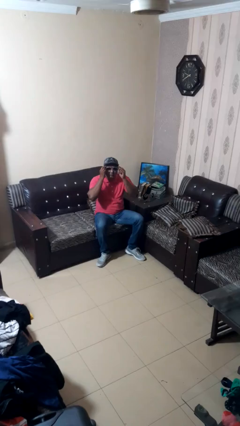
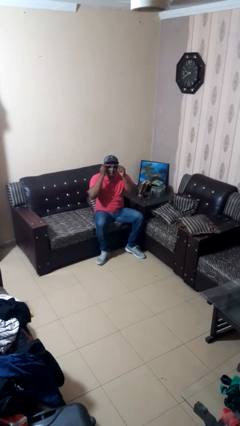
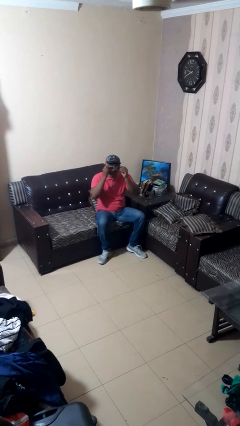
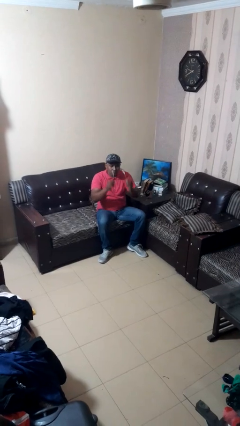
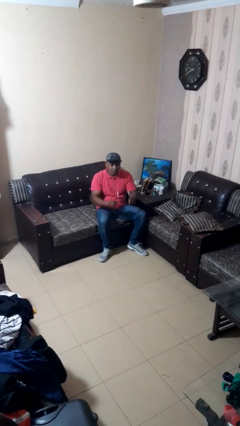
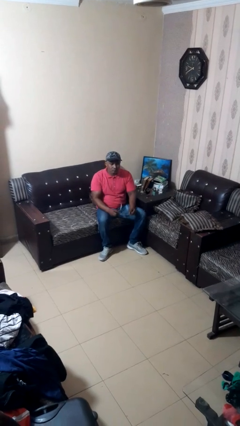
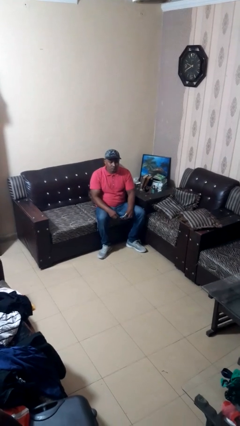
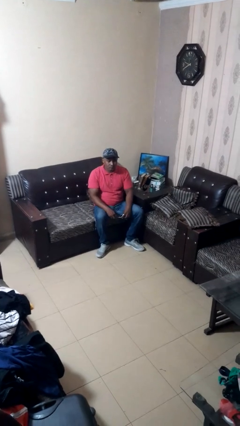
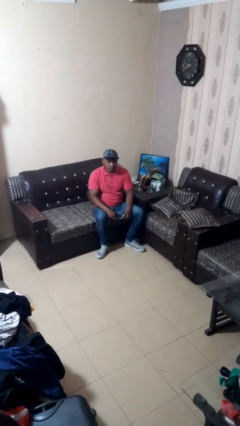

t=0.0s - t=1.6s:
person takes off sunglasses

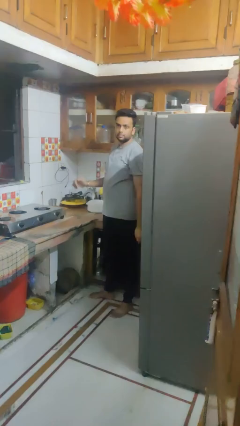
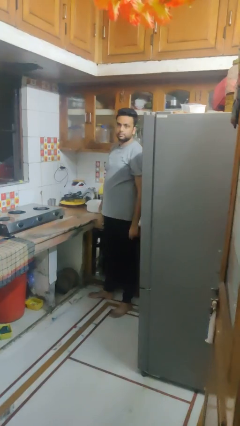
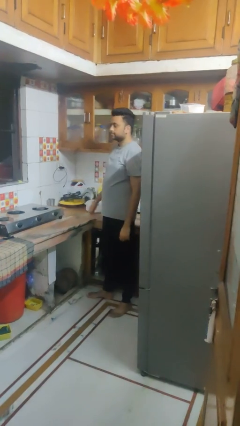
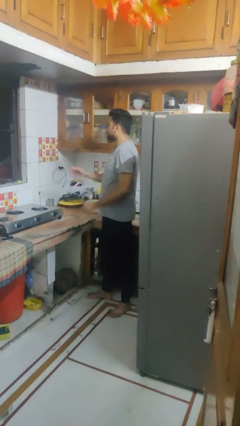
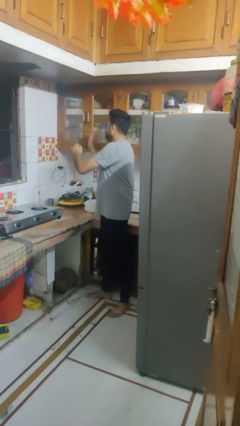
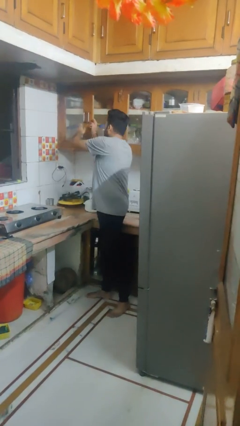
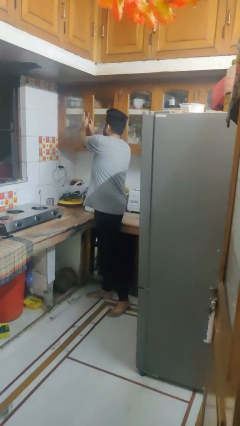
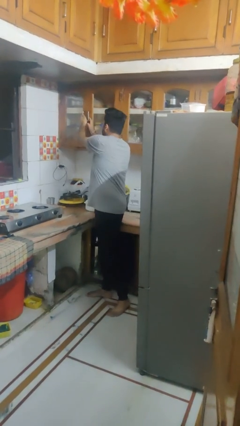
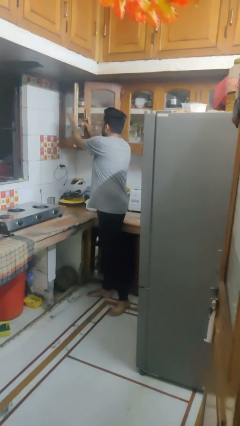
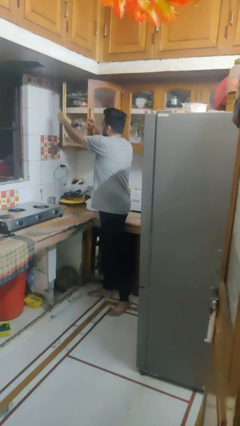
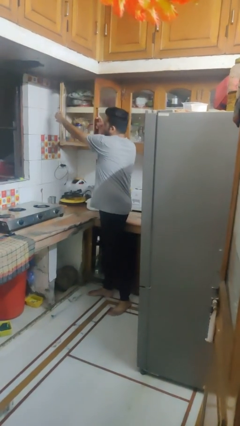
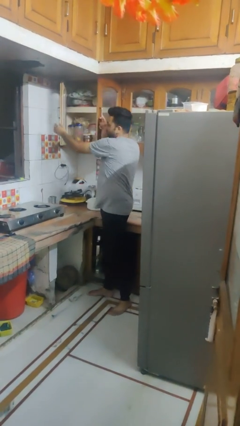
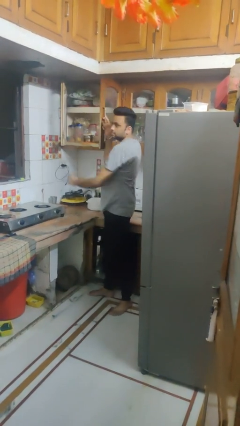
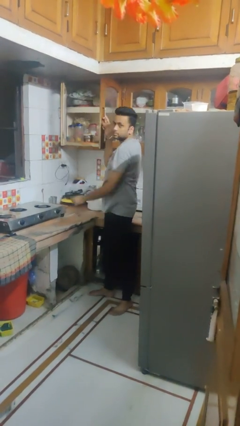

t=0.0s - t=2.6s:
person opens cabinet

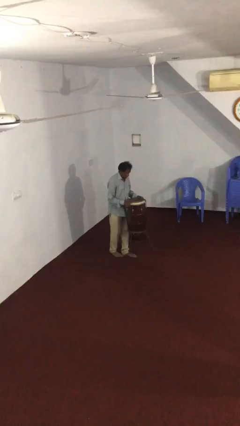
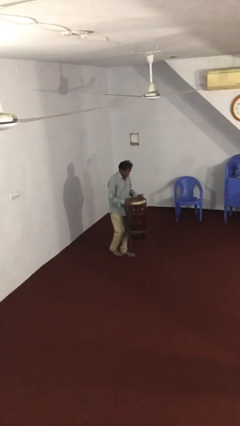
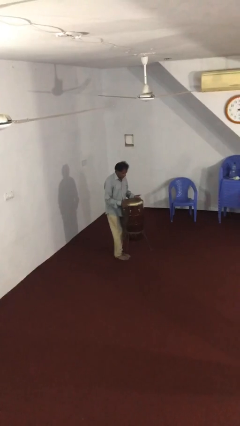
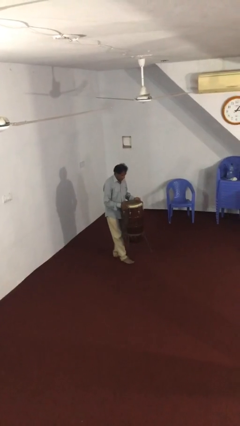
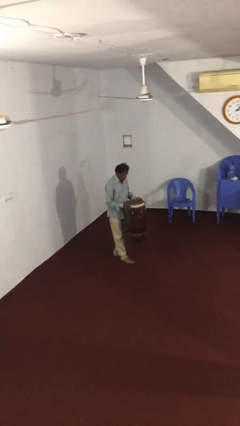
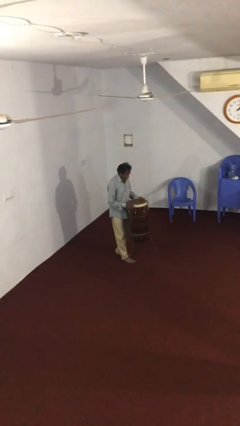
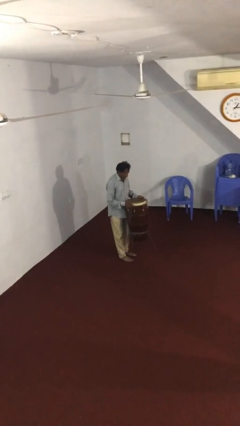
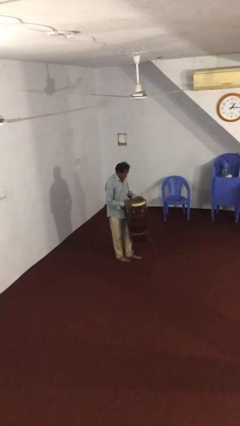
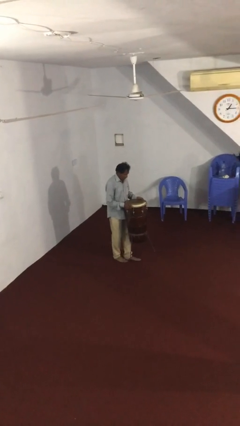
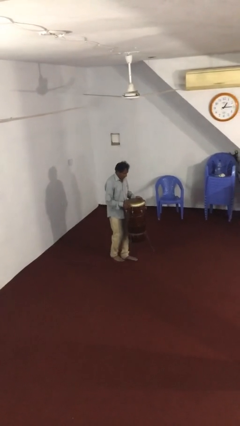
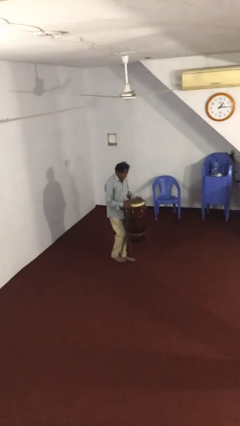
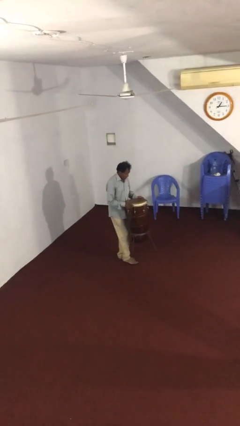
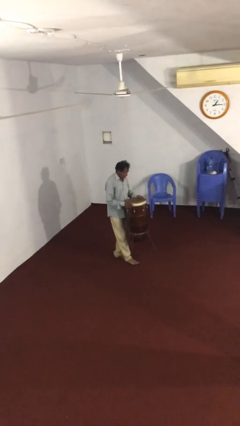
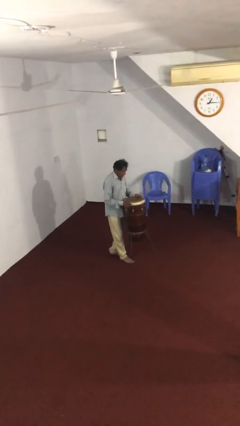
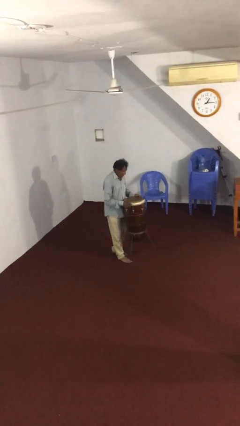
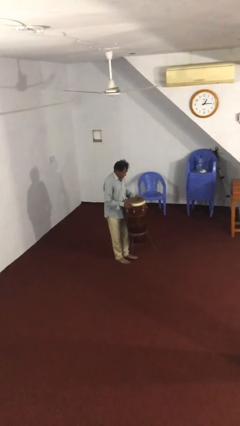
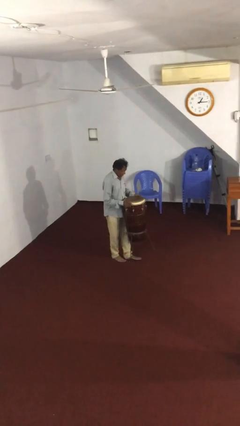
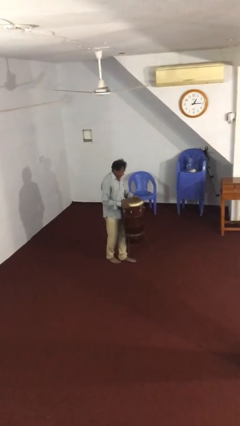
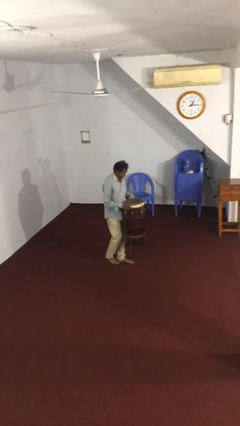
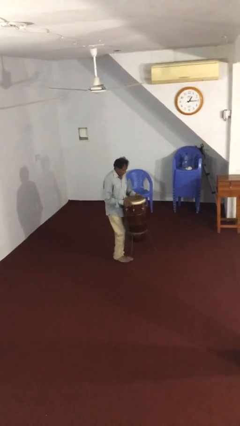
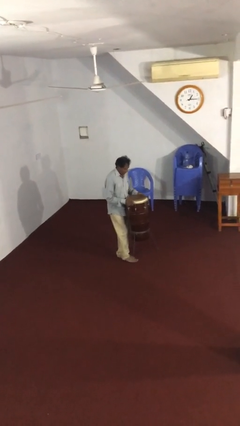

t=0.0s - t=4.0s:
person carries heavy object

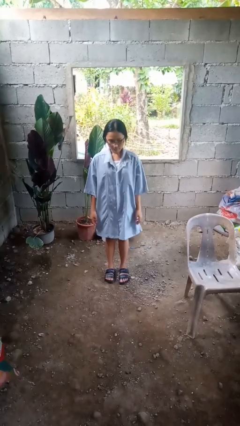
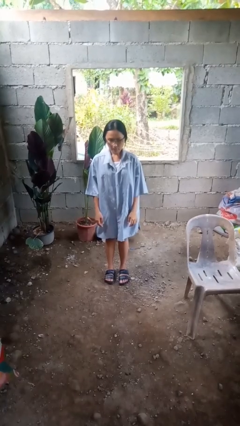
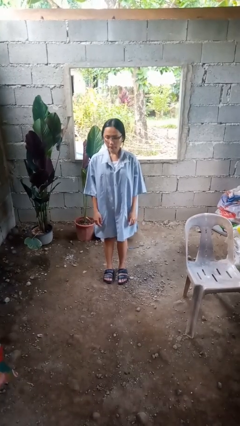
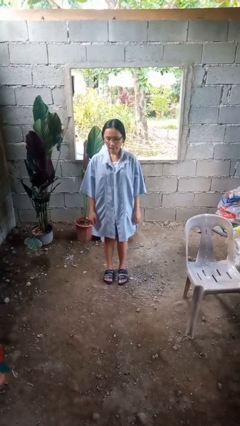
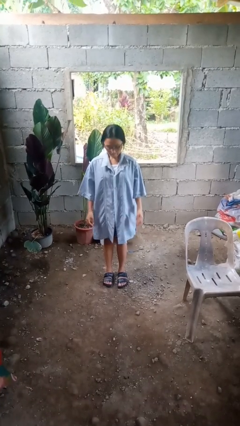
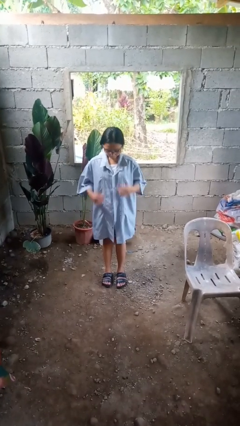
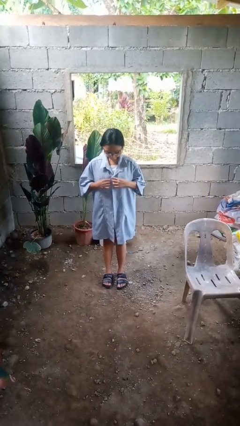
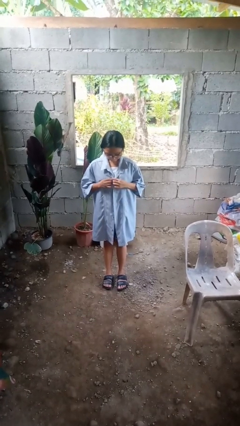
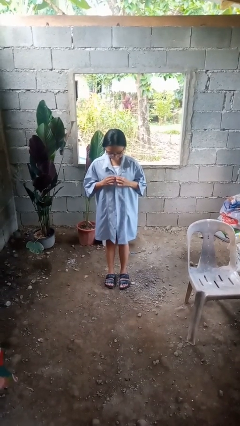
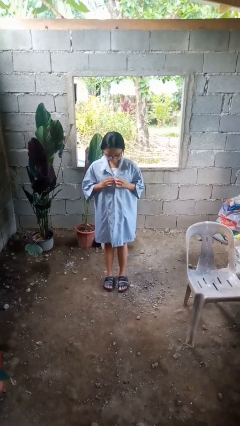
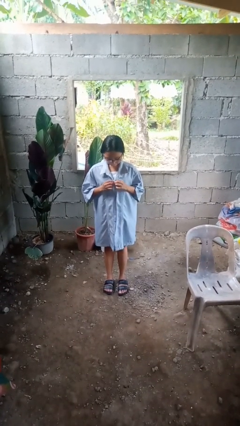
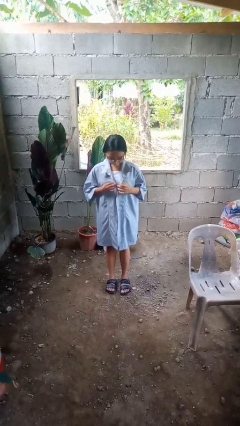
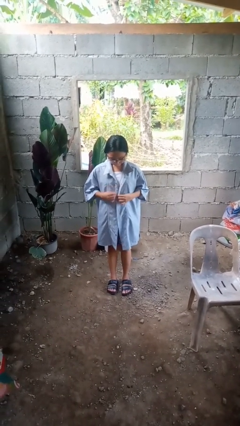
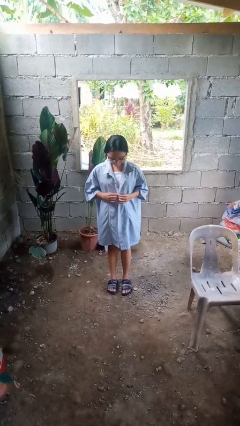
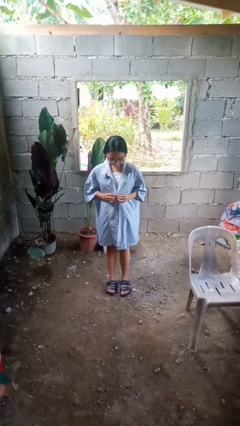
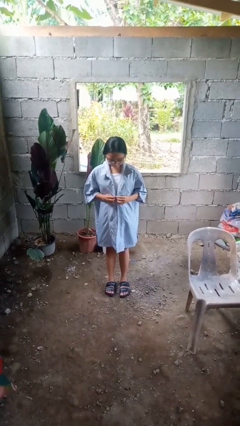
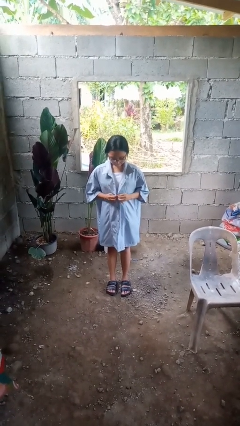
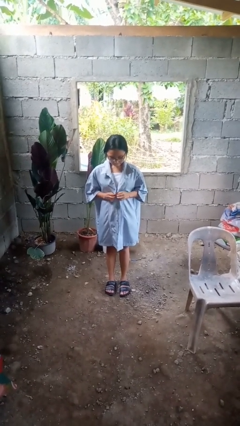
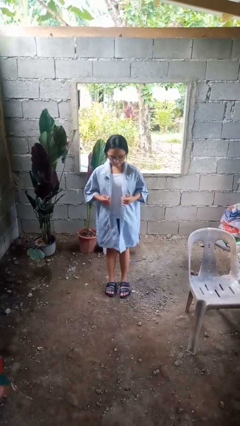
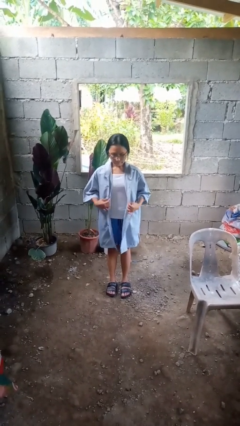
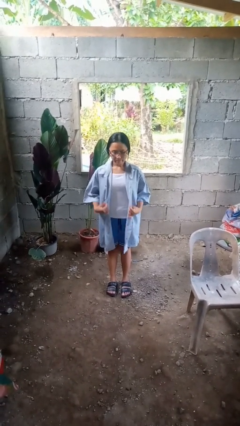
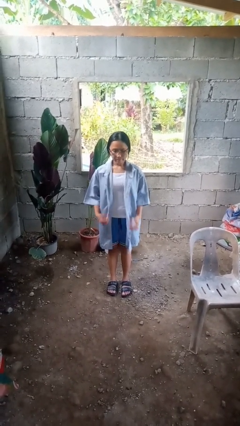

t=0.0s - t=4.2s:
person unbuttons shirt

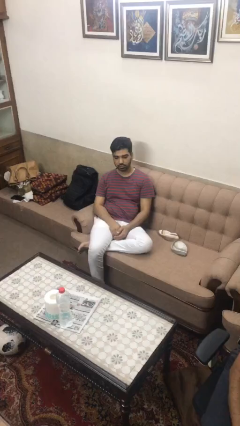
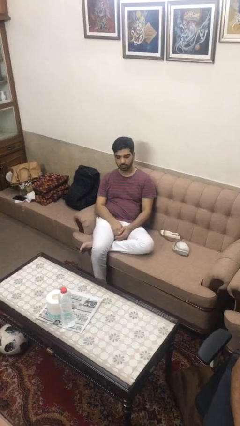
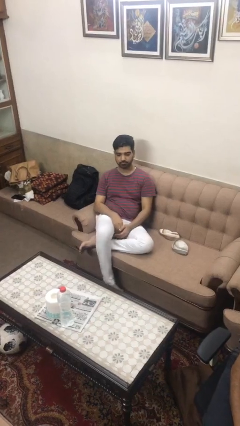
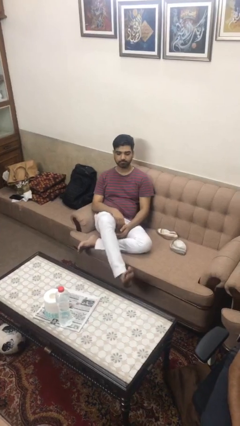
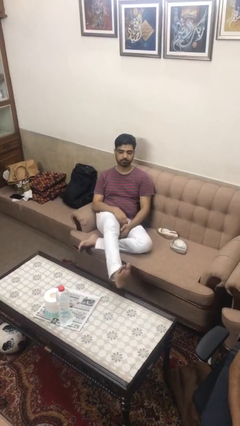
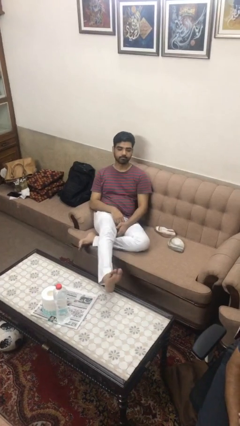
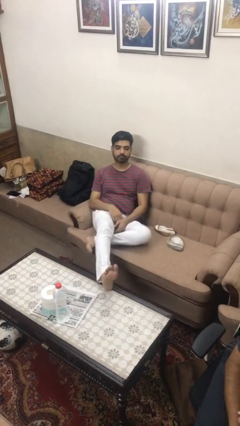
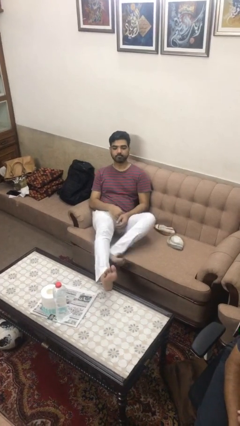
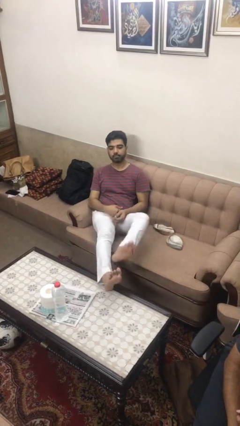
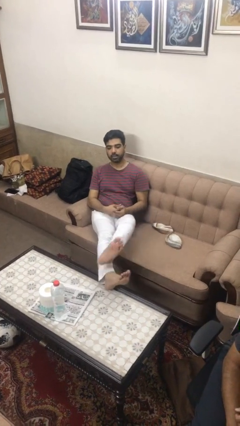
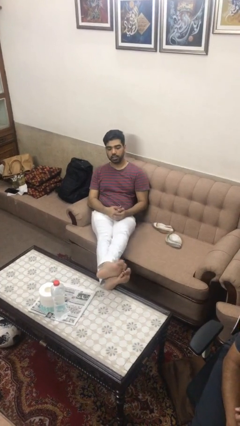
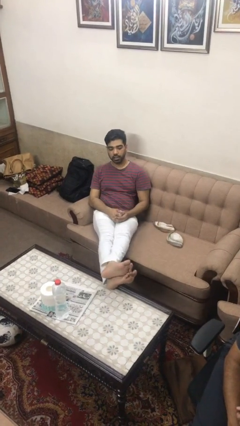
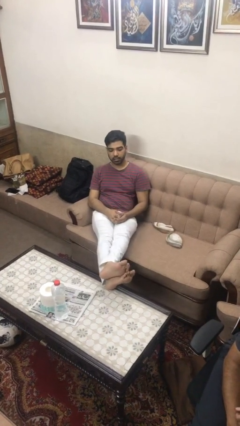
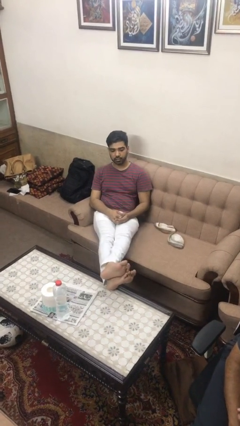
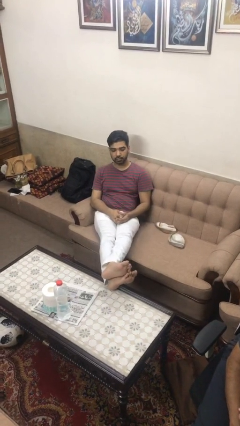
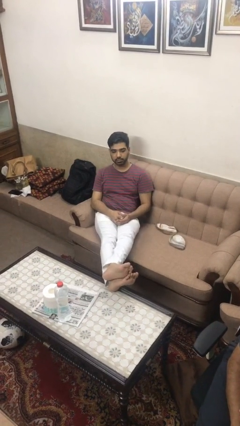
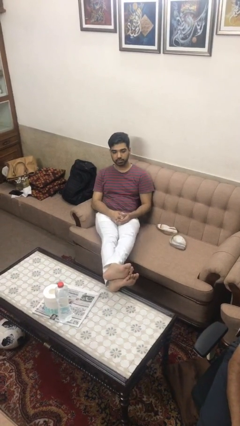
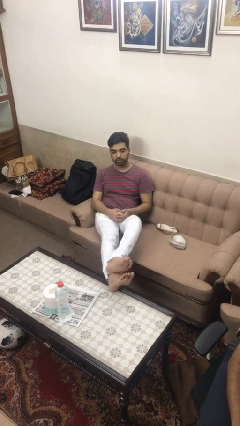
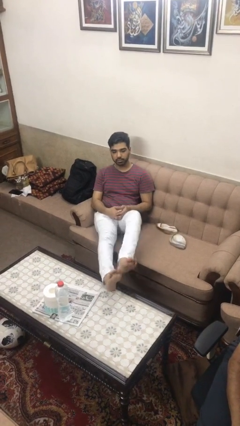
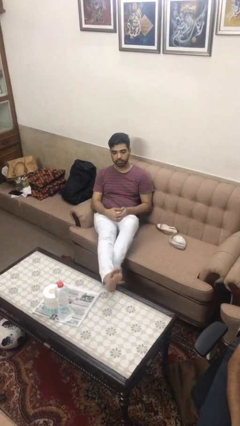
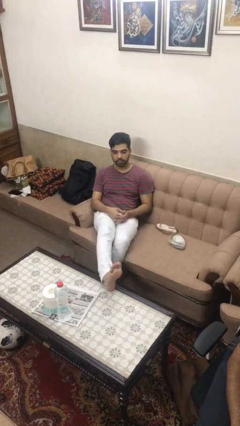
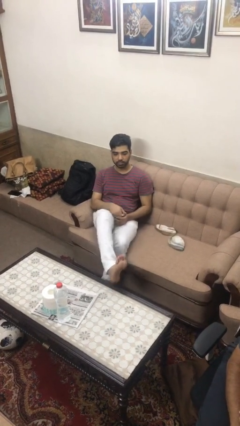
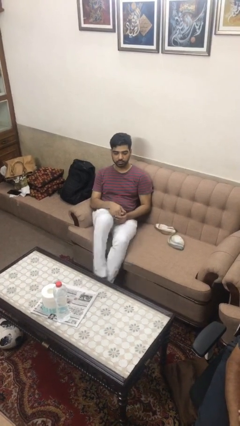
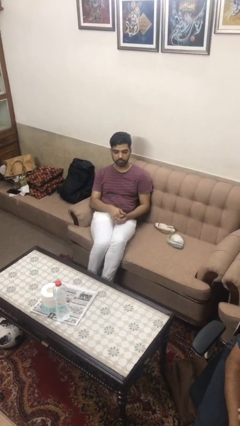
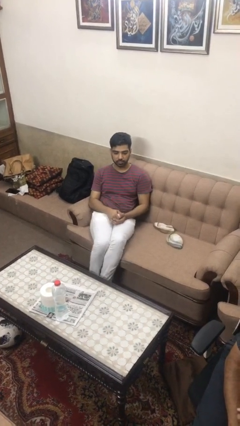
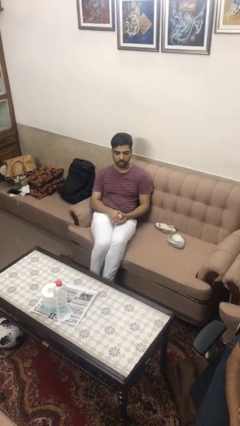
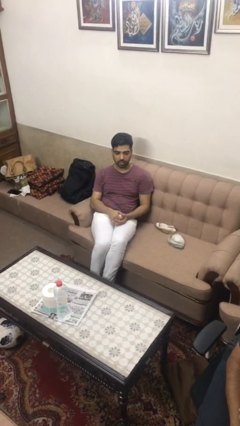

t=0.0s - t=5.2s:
person puts feet up
